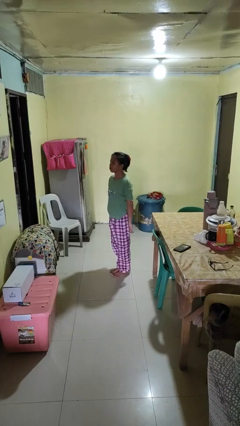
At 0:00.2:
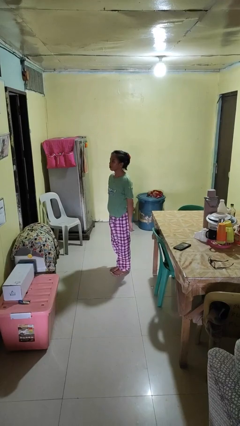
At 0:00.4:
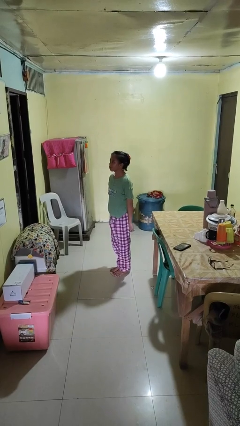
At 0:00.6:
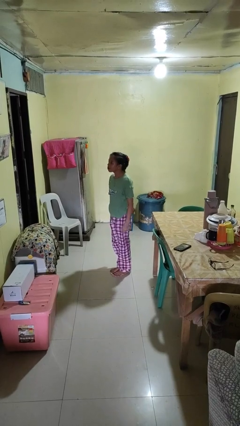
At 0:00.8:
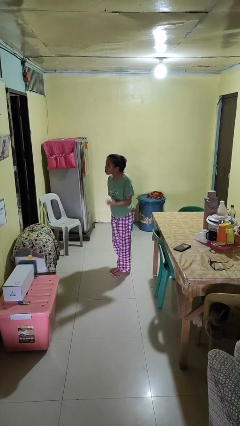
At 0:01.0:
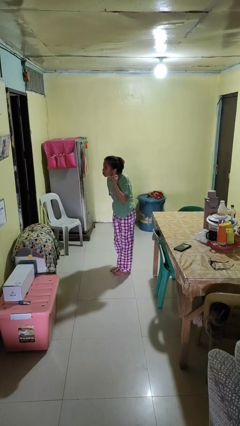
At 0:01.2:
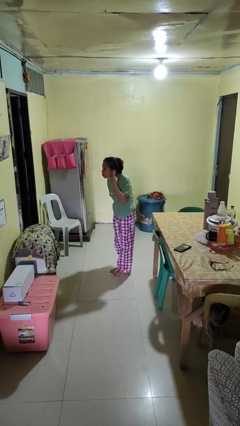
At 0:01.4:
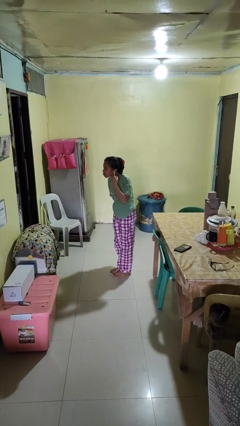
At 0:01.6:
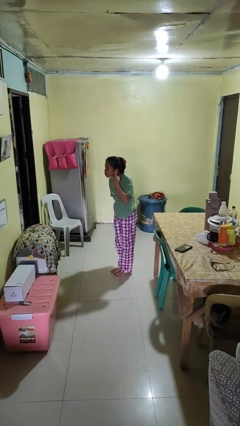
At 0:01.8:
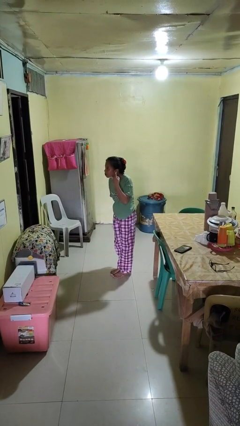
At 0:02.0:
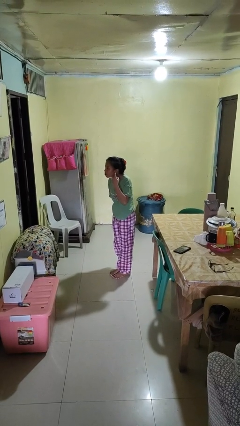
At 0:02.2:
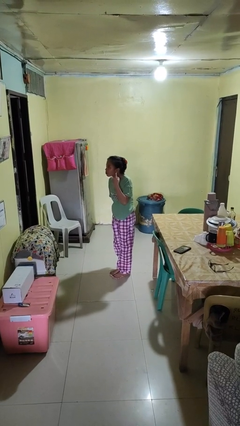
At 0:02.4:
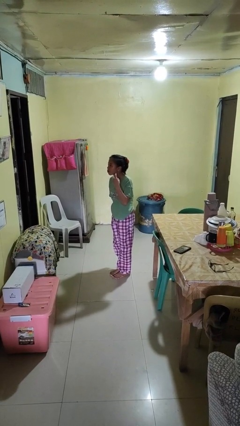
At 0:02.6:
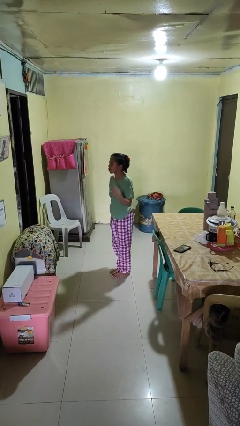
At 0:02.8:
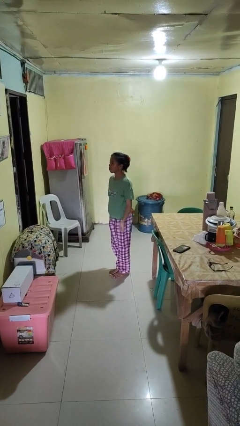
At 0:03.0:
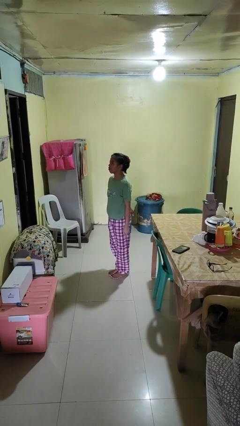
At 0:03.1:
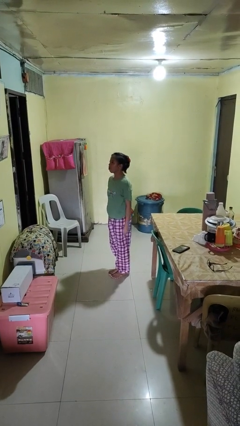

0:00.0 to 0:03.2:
person gestures listen closely

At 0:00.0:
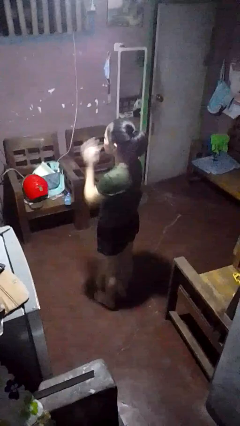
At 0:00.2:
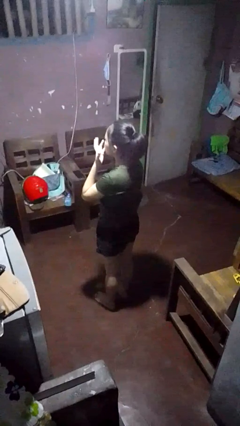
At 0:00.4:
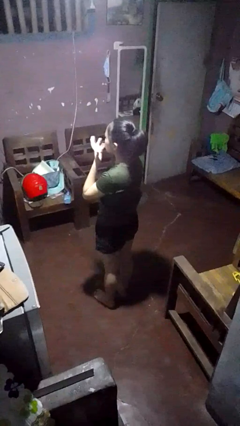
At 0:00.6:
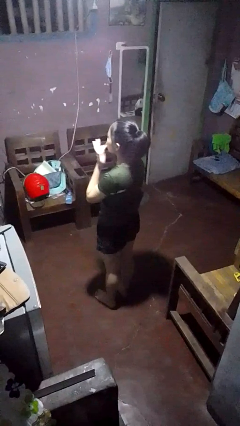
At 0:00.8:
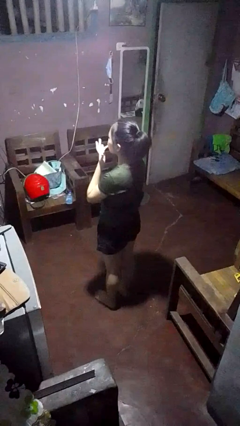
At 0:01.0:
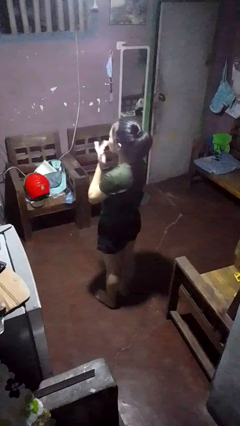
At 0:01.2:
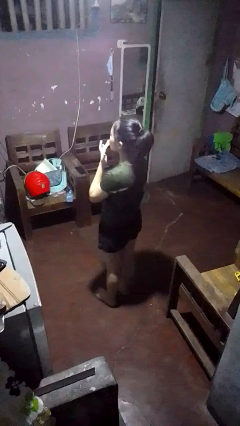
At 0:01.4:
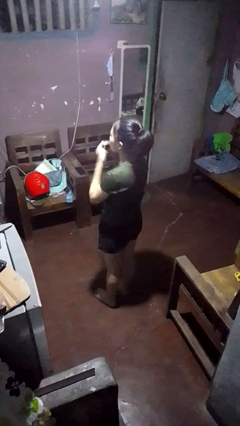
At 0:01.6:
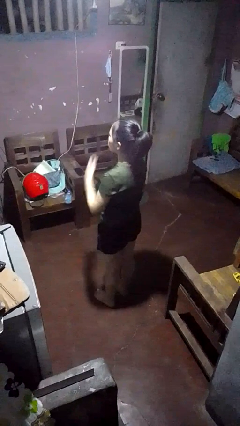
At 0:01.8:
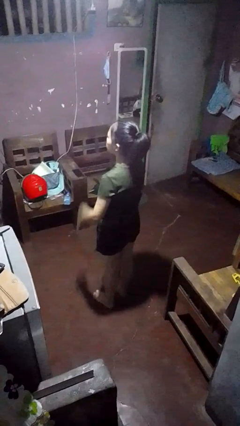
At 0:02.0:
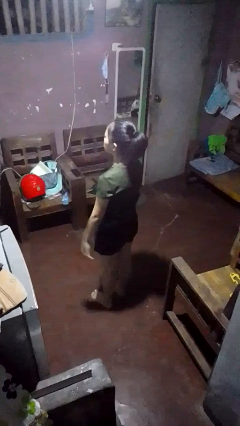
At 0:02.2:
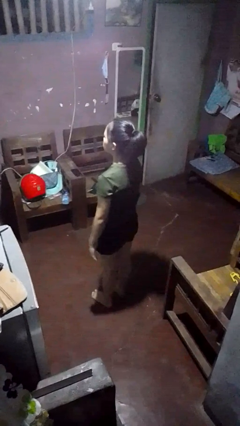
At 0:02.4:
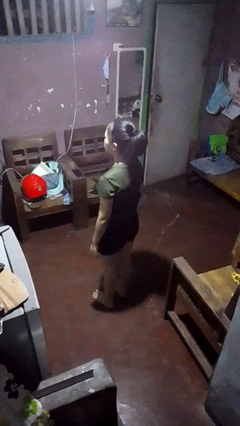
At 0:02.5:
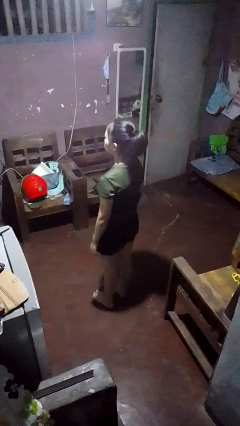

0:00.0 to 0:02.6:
person licks fingers

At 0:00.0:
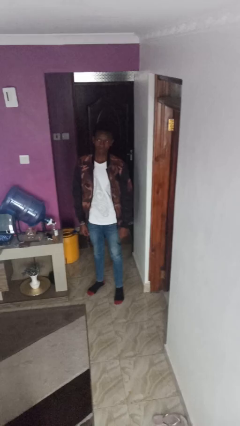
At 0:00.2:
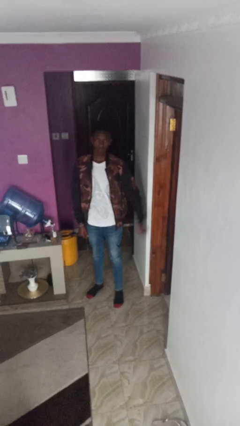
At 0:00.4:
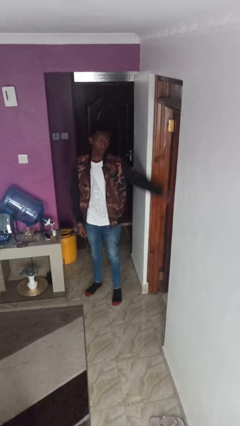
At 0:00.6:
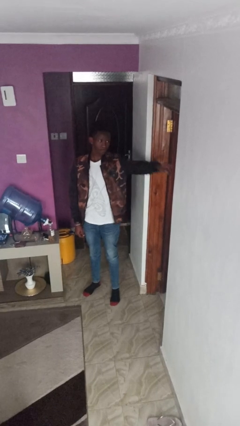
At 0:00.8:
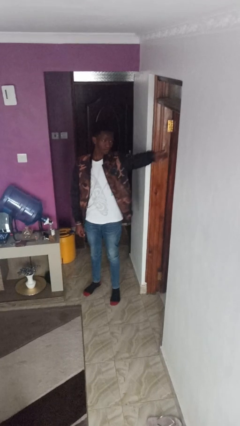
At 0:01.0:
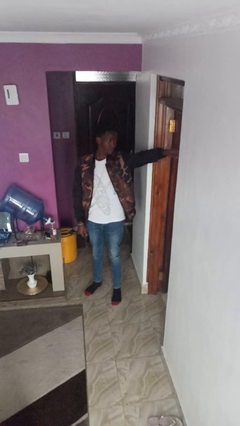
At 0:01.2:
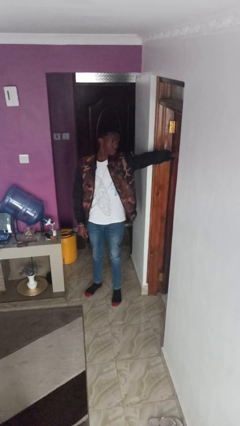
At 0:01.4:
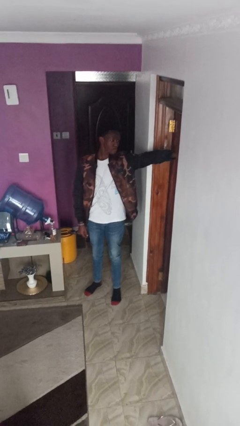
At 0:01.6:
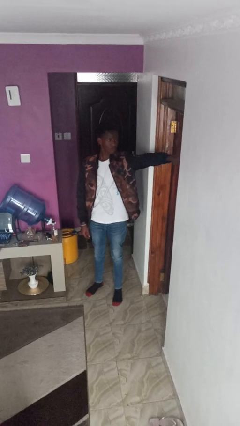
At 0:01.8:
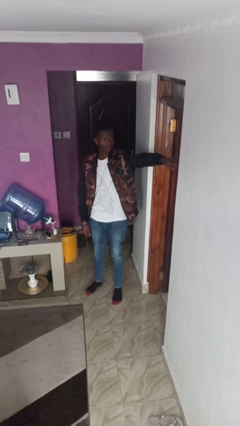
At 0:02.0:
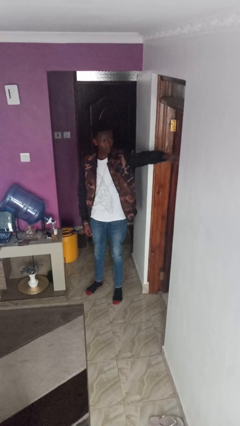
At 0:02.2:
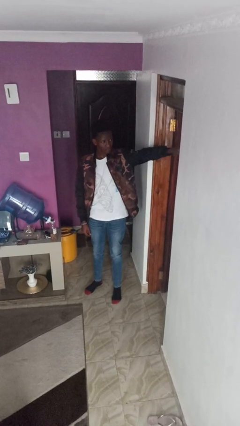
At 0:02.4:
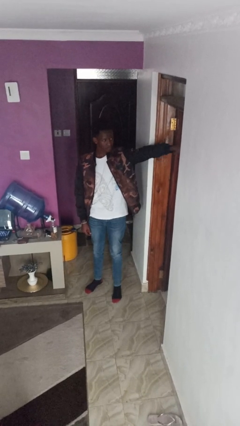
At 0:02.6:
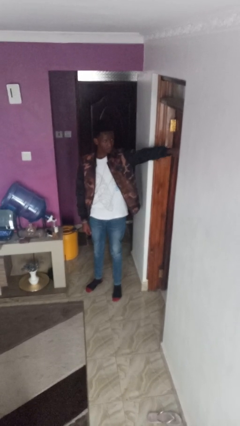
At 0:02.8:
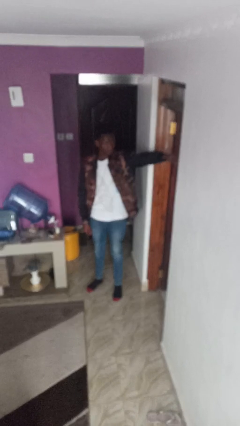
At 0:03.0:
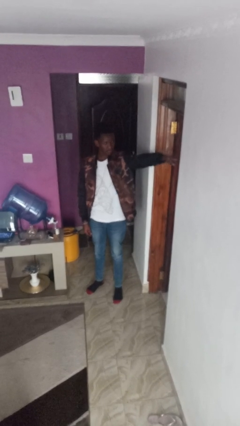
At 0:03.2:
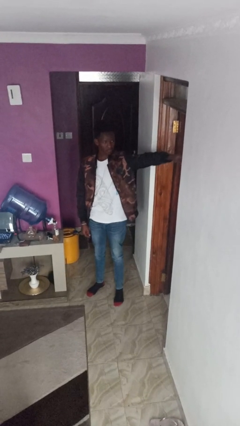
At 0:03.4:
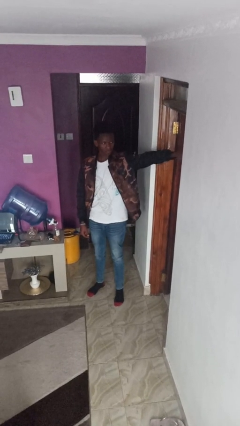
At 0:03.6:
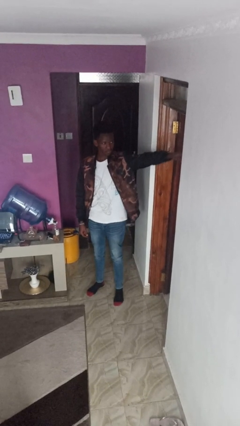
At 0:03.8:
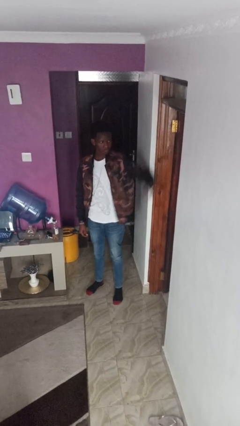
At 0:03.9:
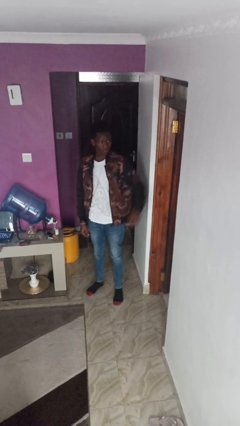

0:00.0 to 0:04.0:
person points at person

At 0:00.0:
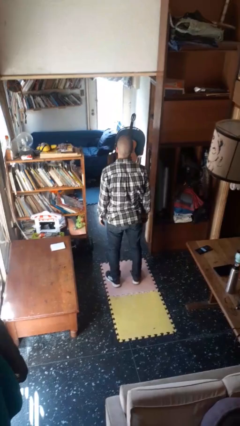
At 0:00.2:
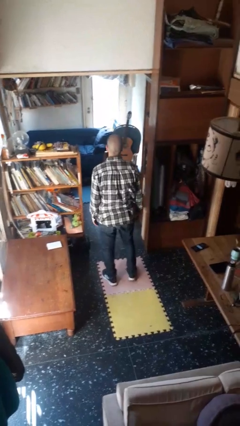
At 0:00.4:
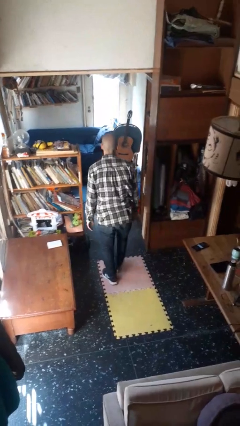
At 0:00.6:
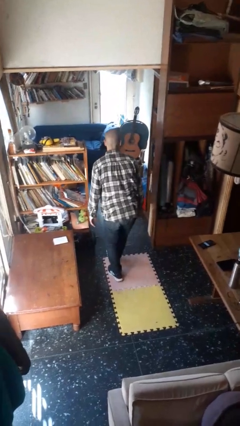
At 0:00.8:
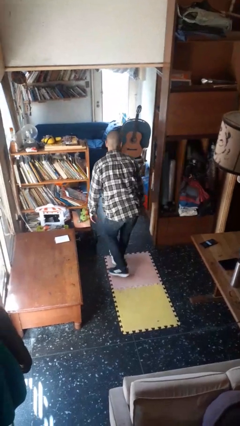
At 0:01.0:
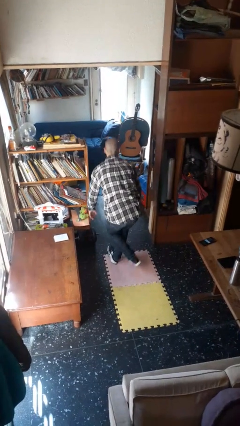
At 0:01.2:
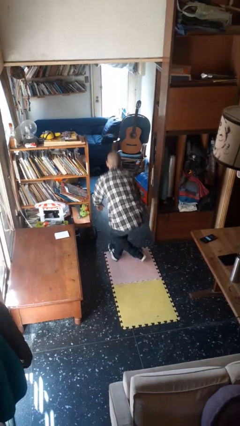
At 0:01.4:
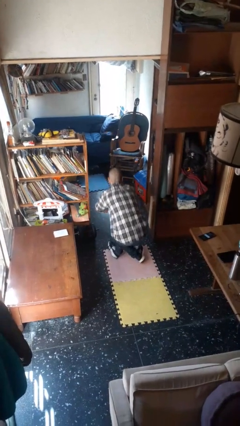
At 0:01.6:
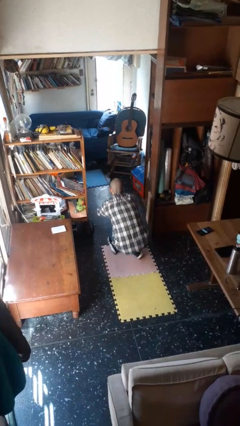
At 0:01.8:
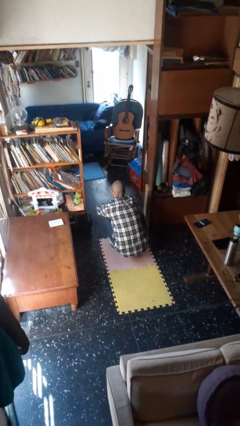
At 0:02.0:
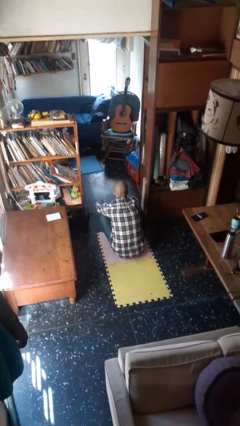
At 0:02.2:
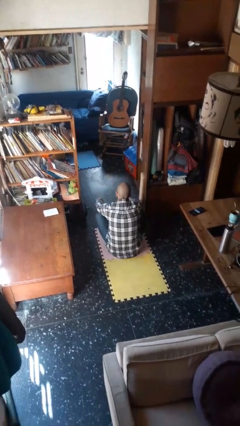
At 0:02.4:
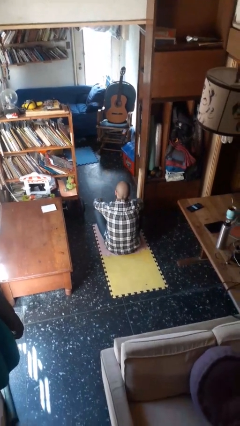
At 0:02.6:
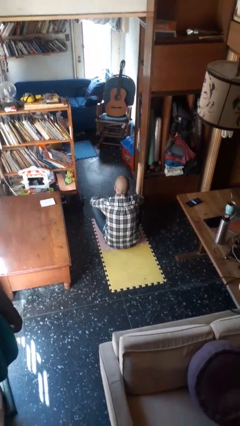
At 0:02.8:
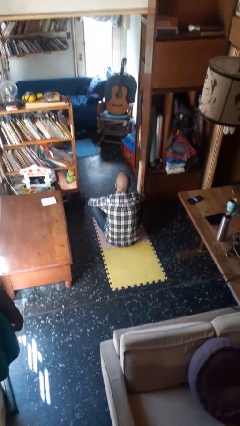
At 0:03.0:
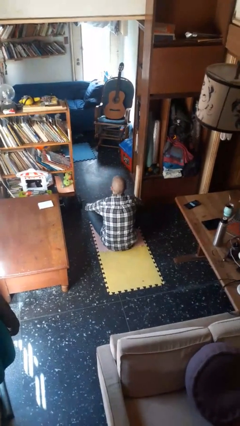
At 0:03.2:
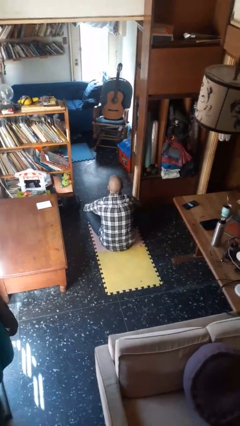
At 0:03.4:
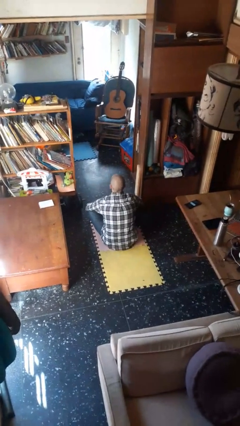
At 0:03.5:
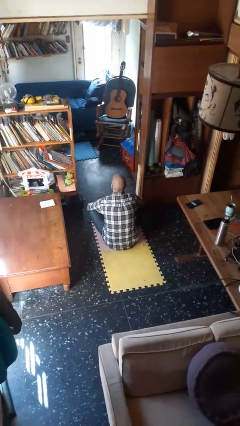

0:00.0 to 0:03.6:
person sits crisscross

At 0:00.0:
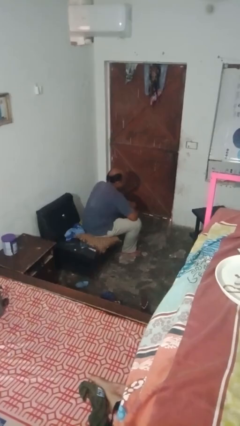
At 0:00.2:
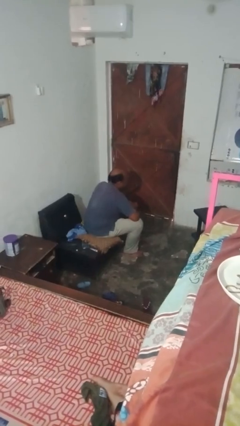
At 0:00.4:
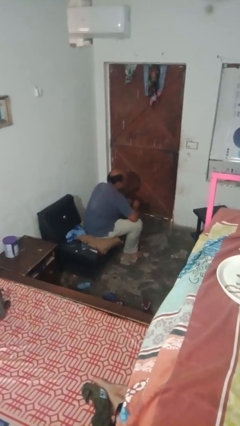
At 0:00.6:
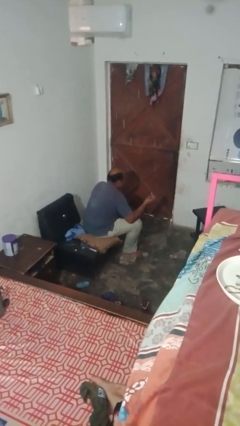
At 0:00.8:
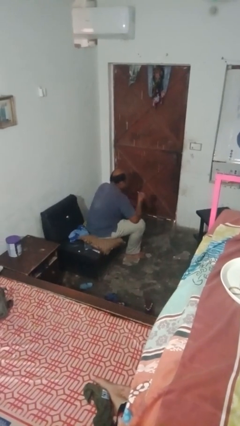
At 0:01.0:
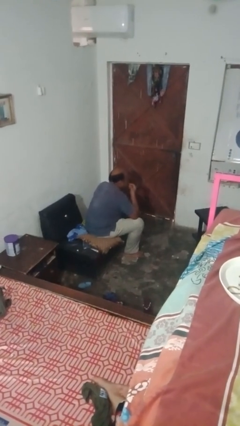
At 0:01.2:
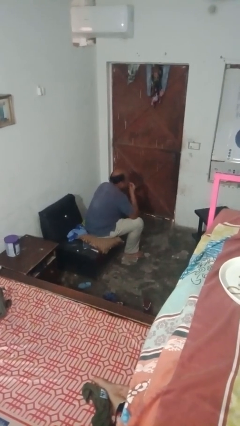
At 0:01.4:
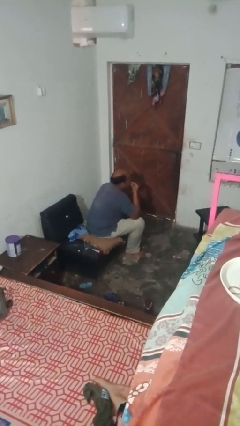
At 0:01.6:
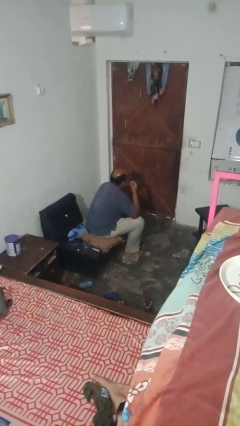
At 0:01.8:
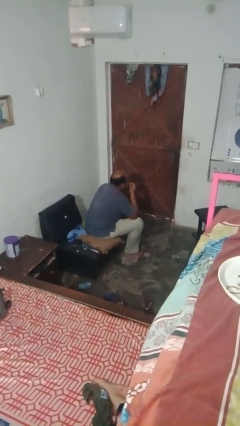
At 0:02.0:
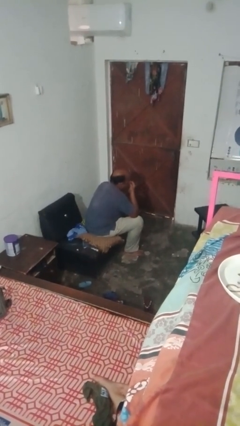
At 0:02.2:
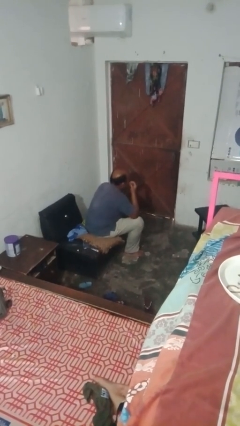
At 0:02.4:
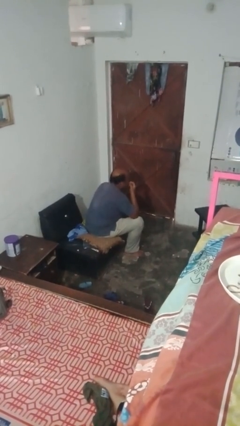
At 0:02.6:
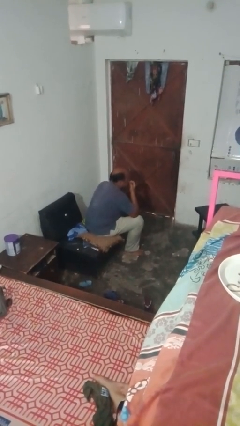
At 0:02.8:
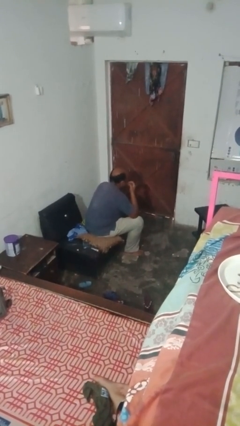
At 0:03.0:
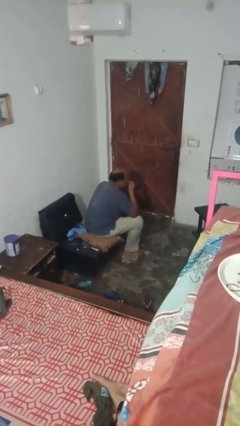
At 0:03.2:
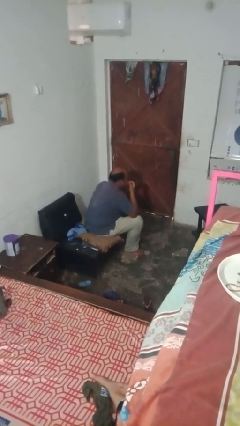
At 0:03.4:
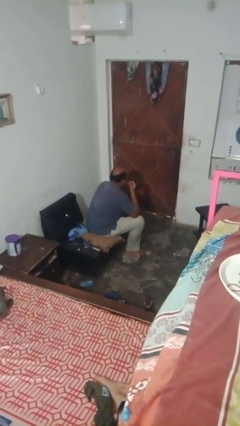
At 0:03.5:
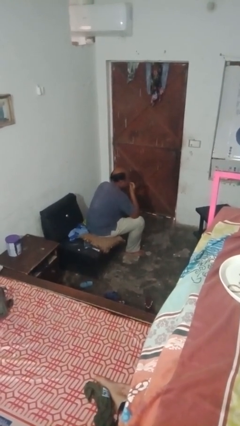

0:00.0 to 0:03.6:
person applies lip makeup

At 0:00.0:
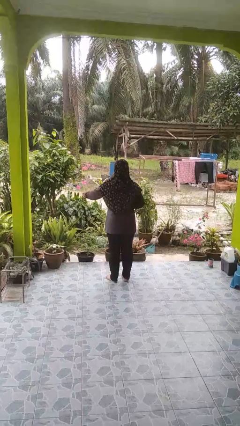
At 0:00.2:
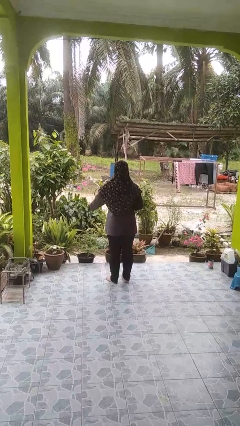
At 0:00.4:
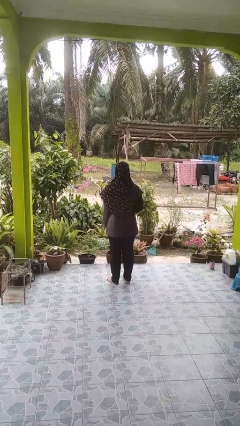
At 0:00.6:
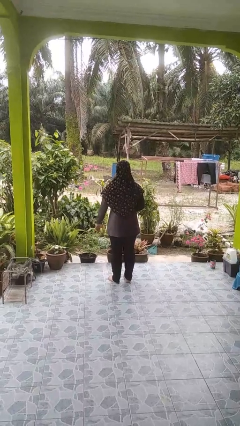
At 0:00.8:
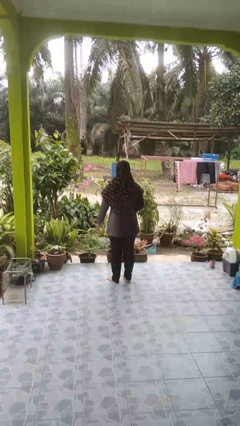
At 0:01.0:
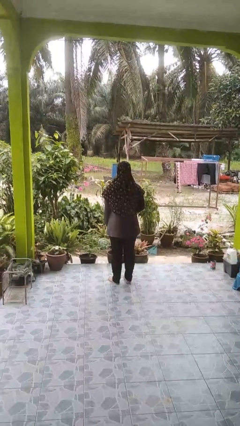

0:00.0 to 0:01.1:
person karate chop
